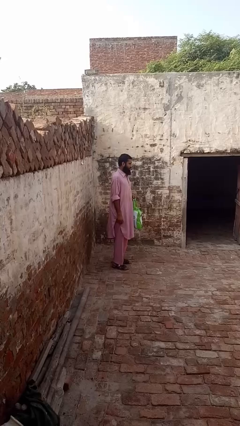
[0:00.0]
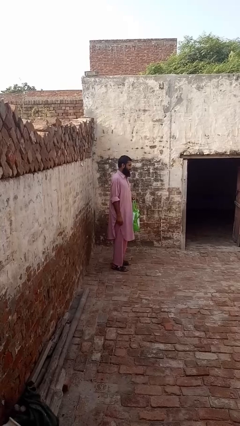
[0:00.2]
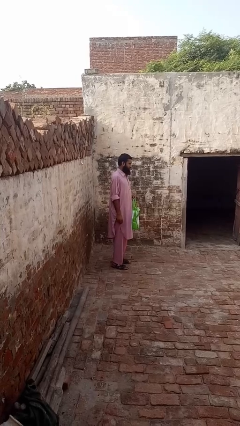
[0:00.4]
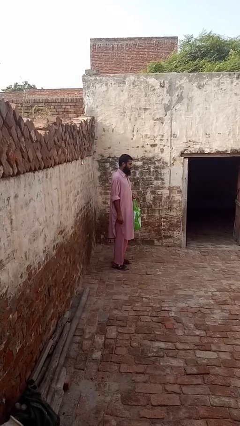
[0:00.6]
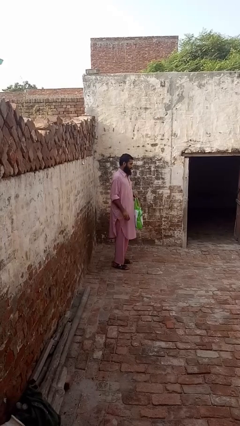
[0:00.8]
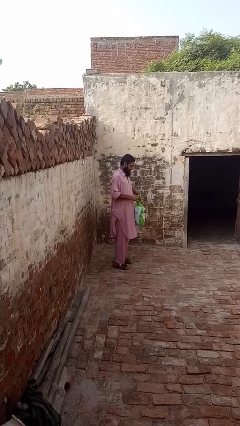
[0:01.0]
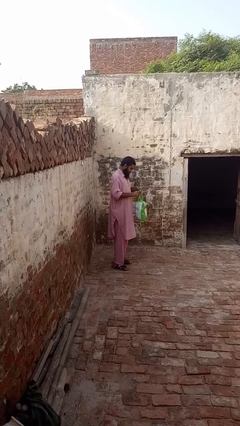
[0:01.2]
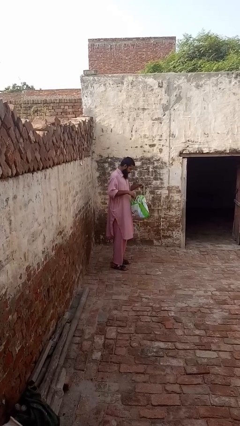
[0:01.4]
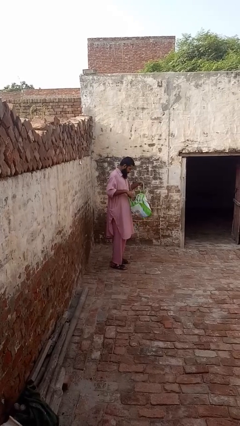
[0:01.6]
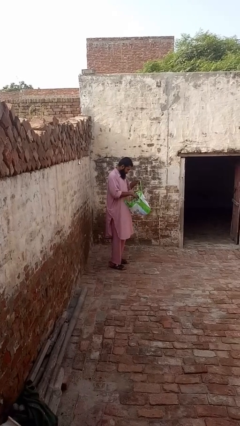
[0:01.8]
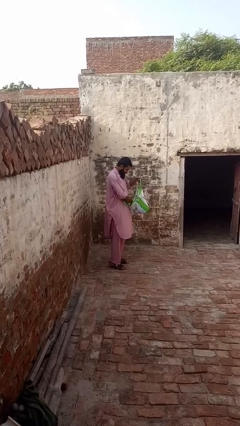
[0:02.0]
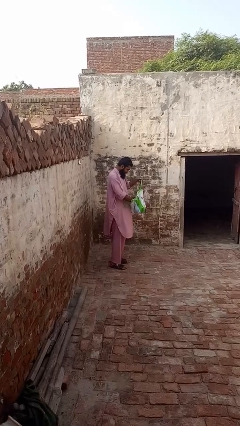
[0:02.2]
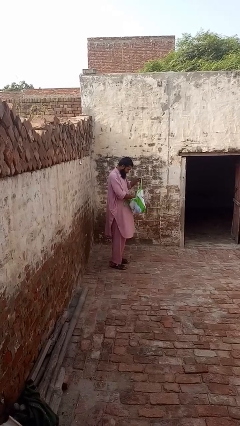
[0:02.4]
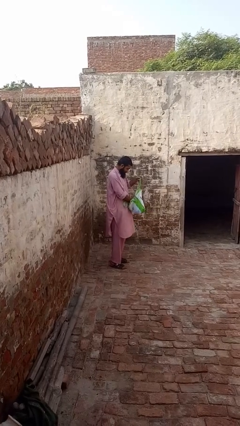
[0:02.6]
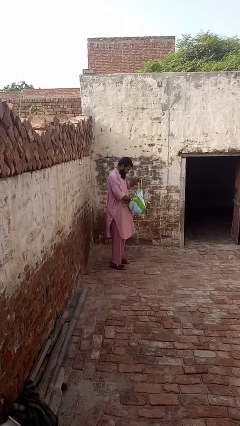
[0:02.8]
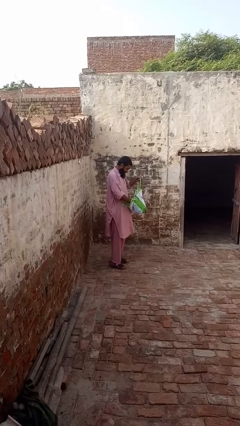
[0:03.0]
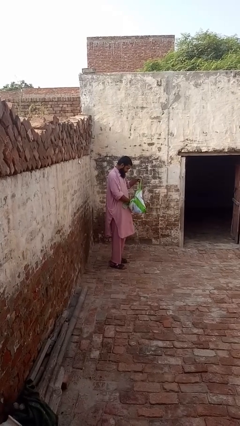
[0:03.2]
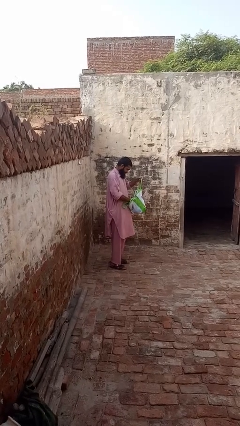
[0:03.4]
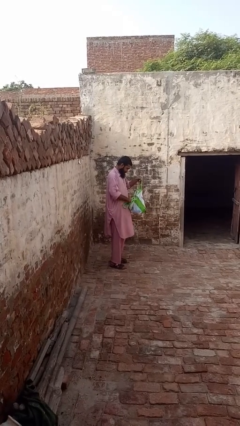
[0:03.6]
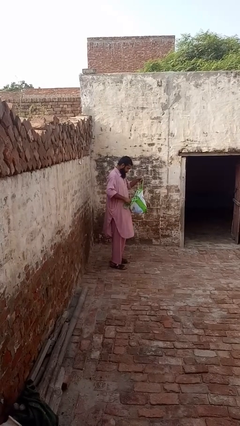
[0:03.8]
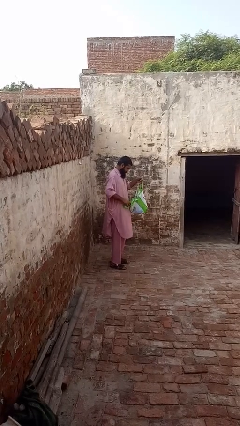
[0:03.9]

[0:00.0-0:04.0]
person searches in bag

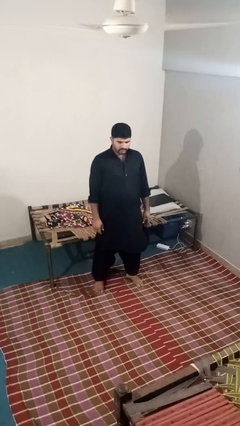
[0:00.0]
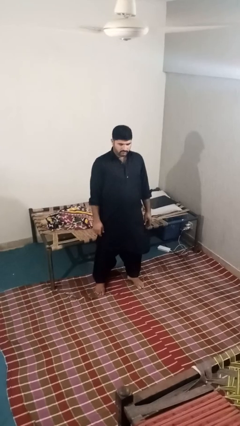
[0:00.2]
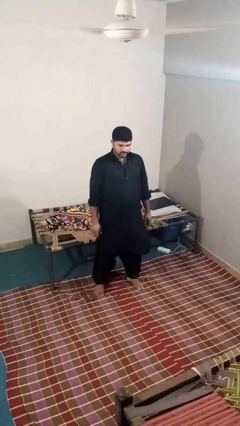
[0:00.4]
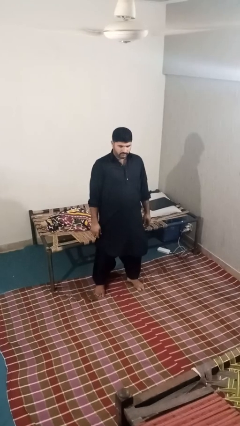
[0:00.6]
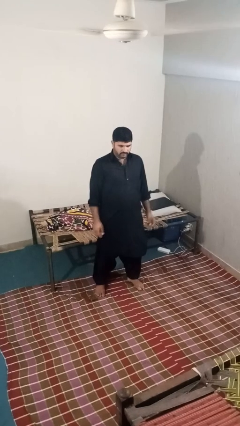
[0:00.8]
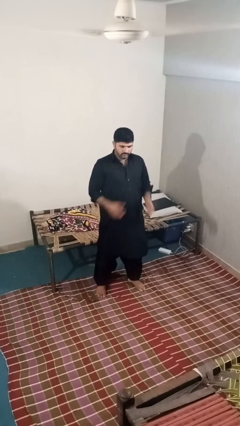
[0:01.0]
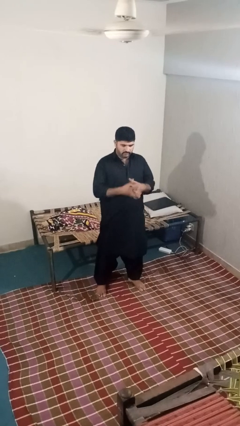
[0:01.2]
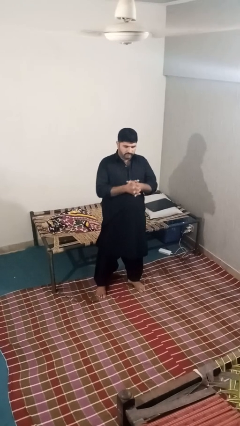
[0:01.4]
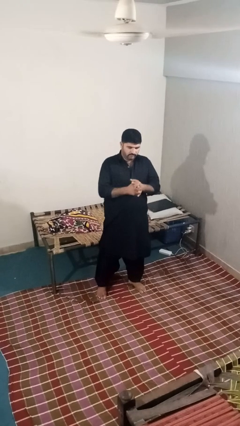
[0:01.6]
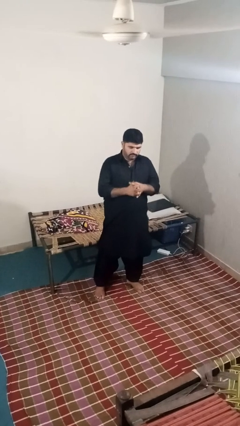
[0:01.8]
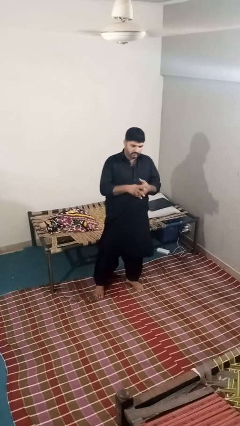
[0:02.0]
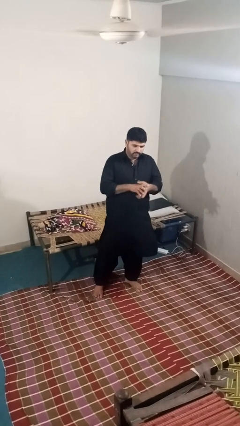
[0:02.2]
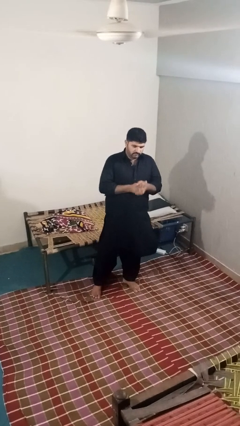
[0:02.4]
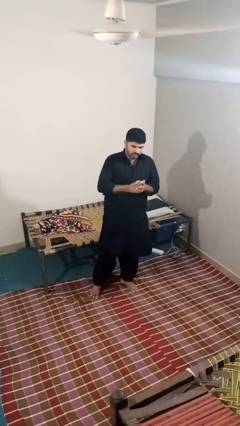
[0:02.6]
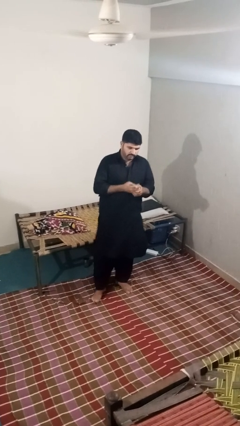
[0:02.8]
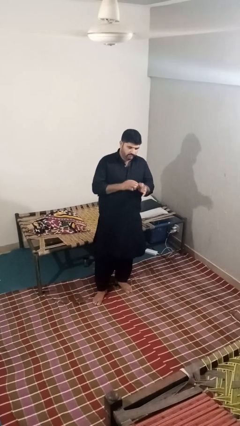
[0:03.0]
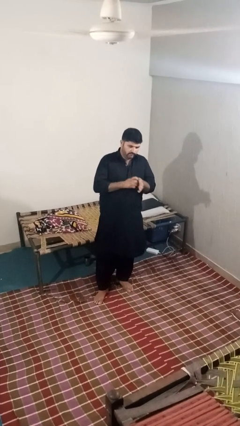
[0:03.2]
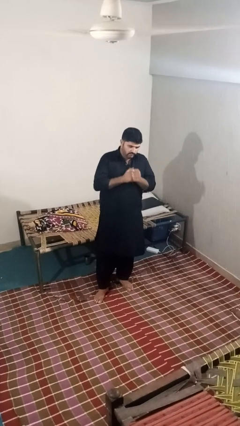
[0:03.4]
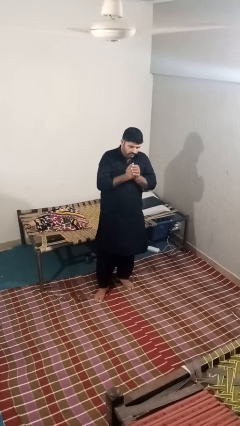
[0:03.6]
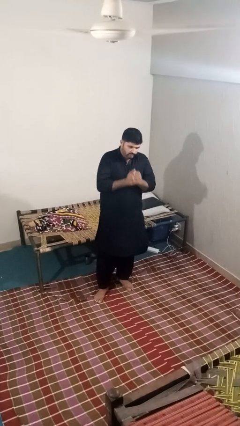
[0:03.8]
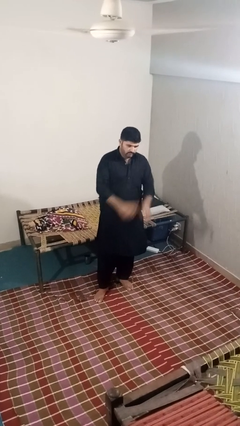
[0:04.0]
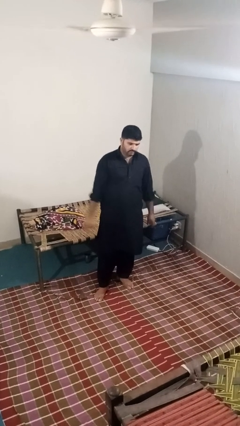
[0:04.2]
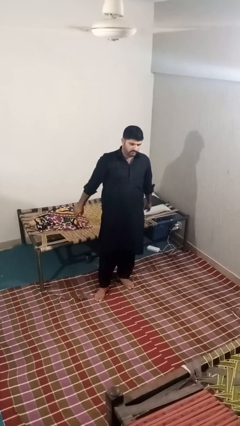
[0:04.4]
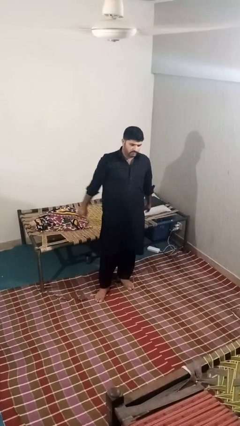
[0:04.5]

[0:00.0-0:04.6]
person cracks knuckles

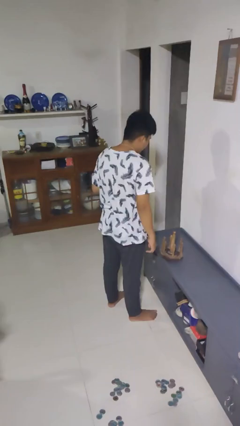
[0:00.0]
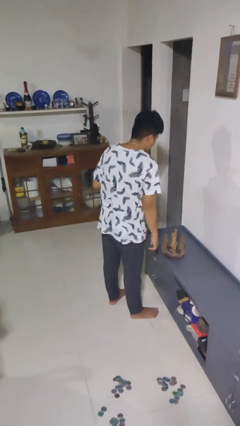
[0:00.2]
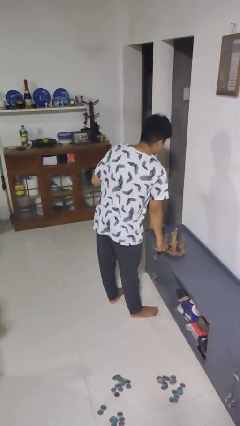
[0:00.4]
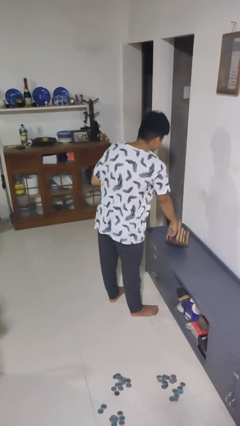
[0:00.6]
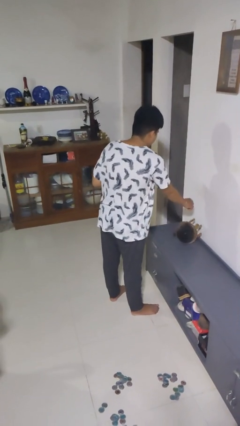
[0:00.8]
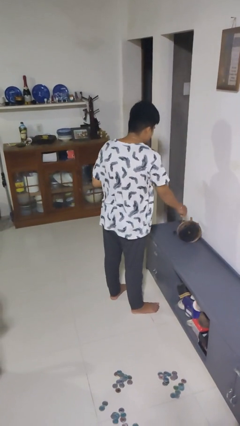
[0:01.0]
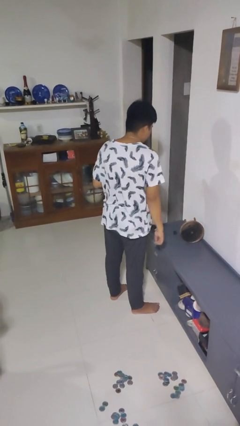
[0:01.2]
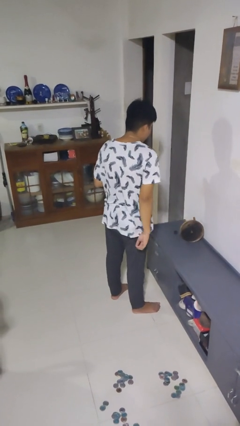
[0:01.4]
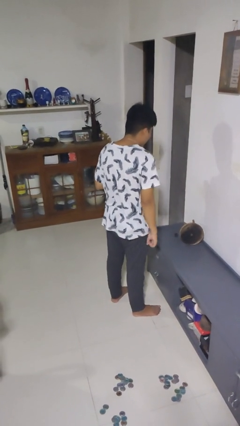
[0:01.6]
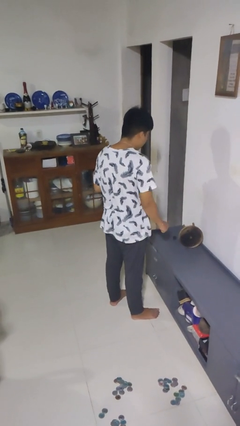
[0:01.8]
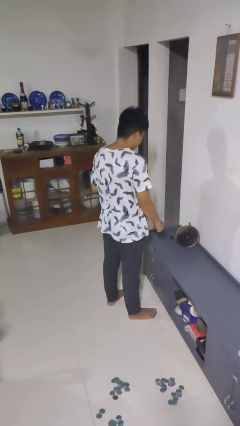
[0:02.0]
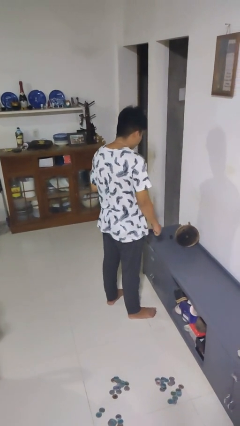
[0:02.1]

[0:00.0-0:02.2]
person knocks over furniture

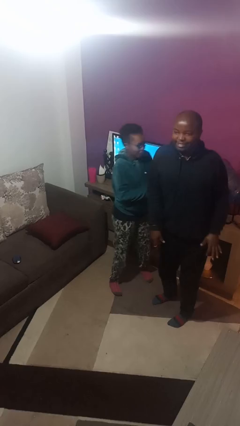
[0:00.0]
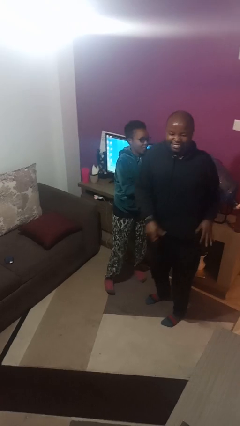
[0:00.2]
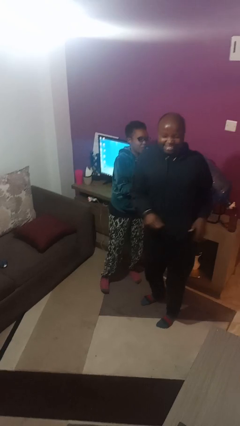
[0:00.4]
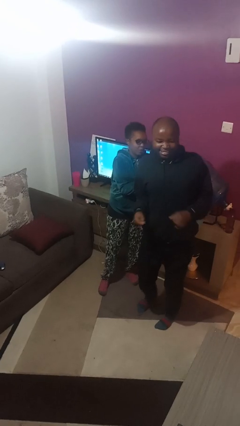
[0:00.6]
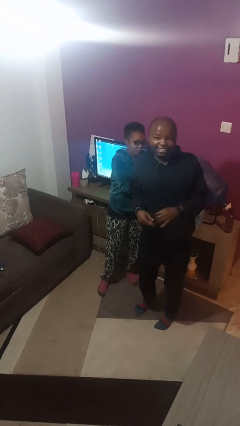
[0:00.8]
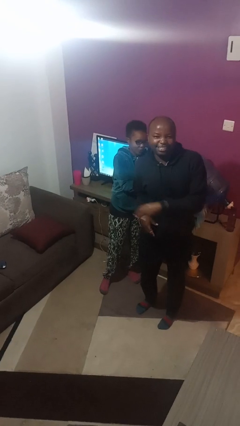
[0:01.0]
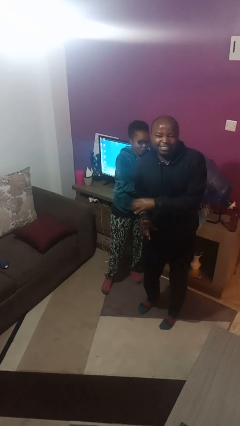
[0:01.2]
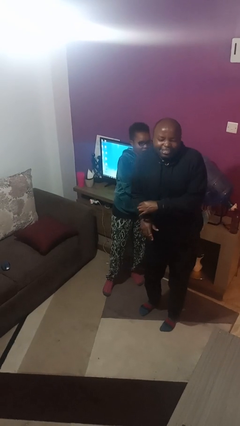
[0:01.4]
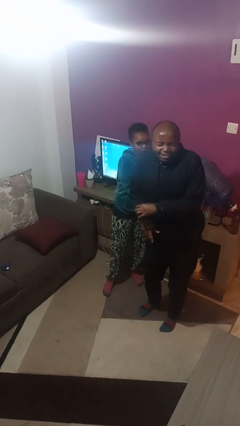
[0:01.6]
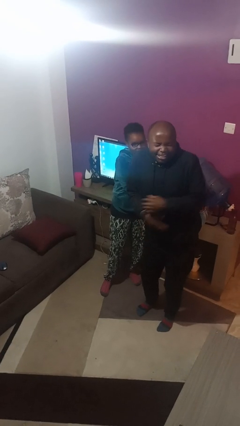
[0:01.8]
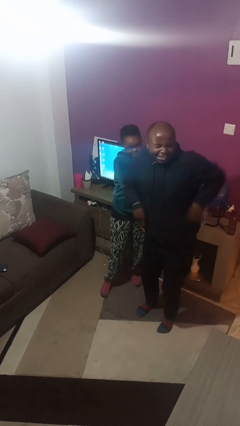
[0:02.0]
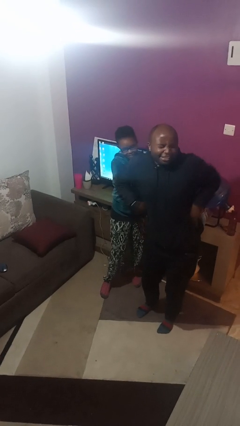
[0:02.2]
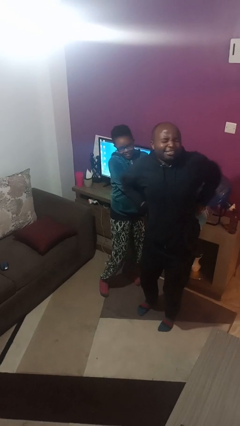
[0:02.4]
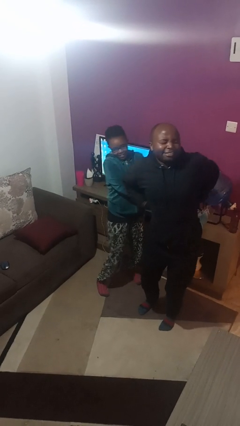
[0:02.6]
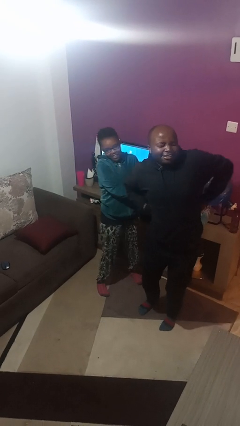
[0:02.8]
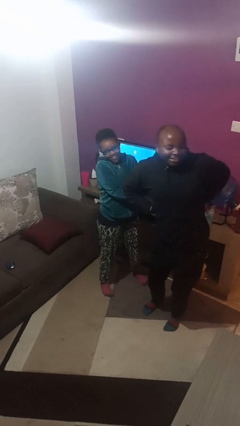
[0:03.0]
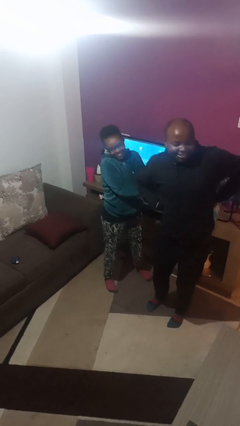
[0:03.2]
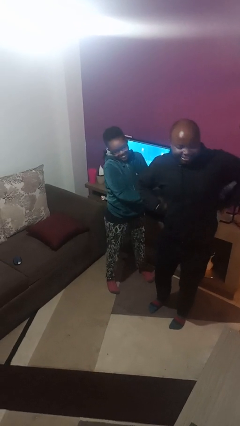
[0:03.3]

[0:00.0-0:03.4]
person tickles person

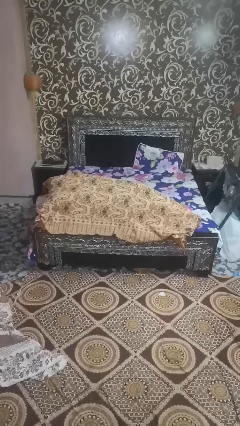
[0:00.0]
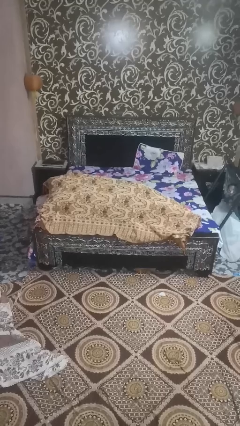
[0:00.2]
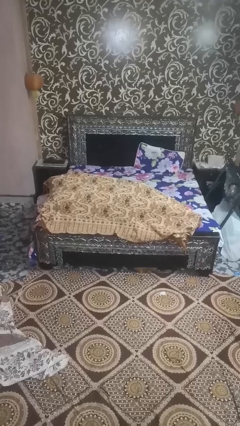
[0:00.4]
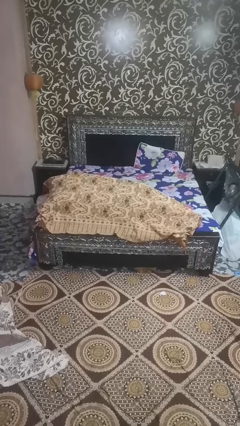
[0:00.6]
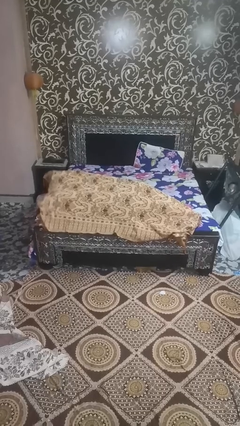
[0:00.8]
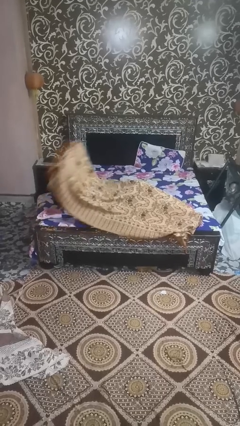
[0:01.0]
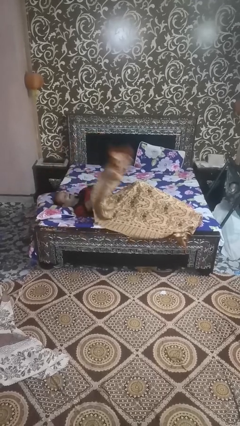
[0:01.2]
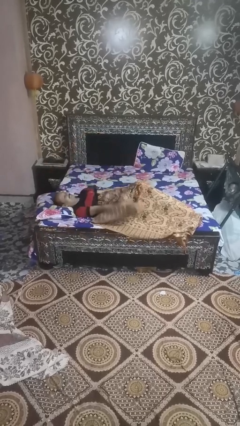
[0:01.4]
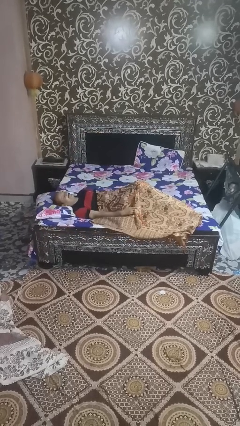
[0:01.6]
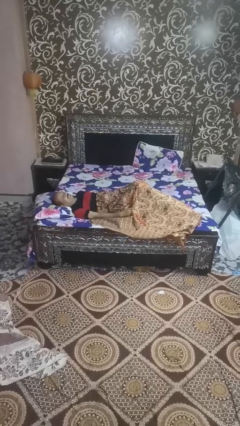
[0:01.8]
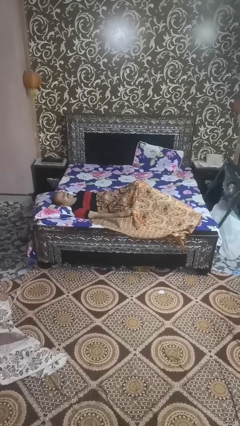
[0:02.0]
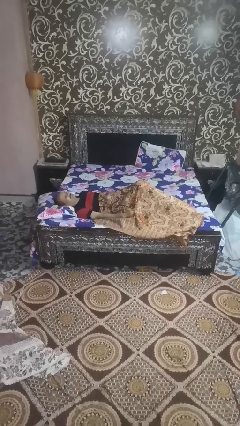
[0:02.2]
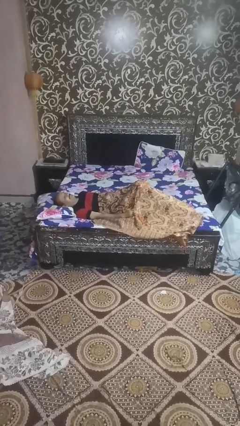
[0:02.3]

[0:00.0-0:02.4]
person uncovers with blanket

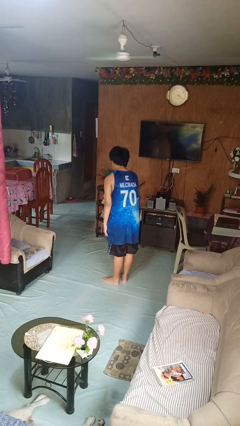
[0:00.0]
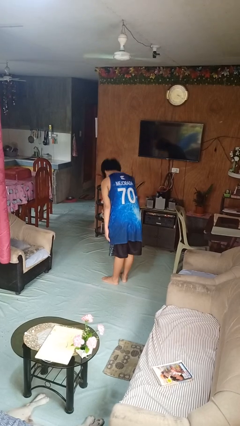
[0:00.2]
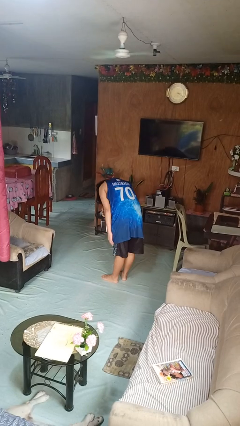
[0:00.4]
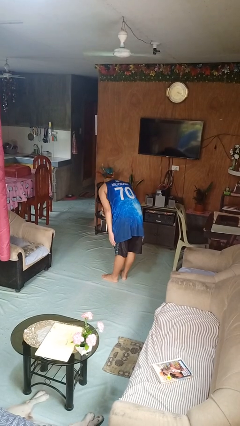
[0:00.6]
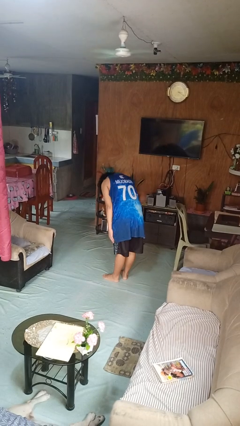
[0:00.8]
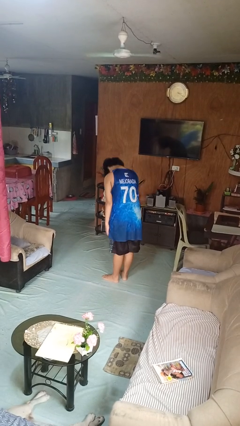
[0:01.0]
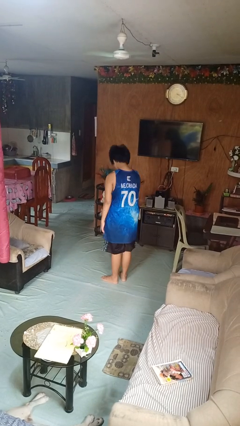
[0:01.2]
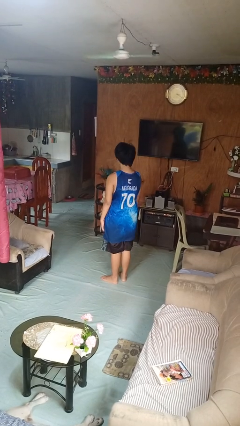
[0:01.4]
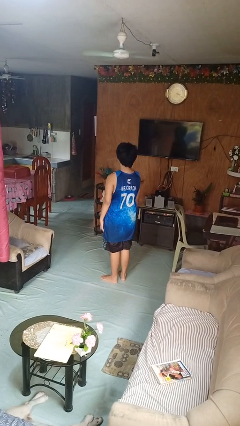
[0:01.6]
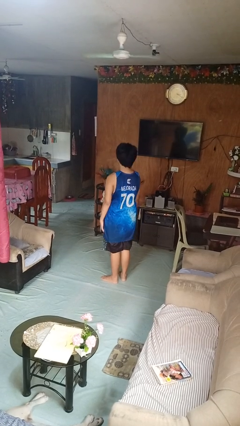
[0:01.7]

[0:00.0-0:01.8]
person bows
